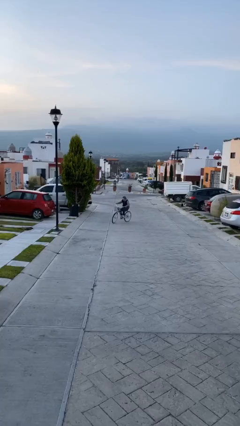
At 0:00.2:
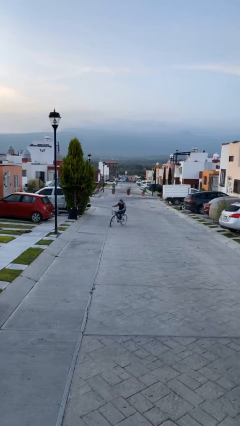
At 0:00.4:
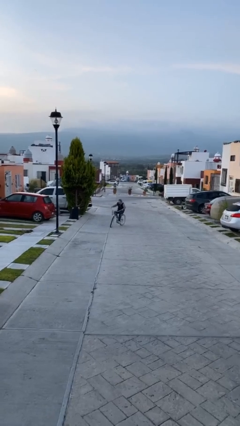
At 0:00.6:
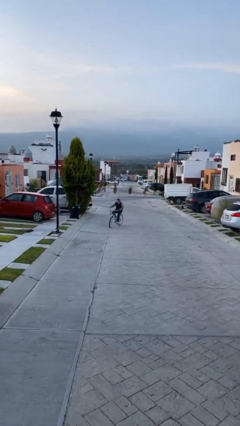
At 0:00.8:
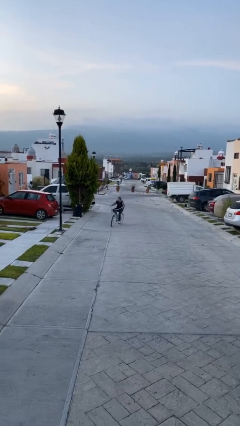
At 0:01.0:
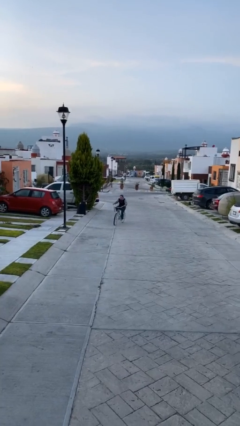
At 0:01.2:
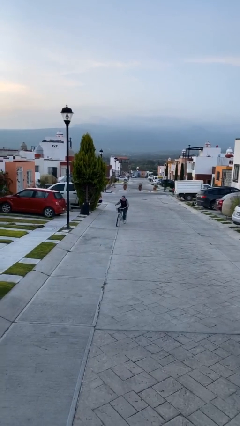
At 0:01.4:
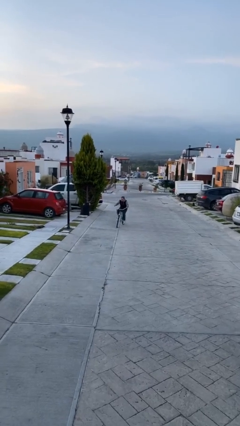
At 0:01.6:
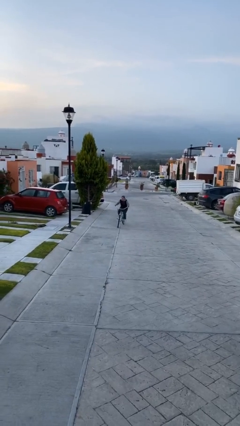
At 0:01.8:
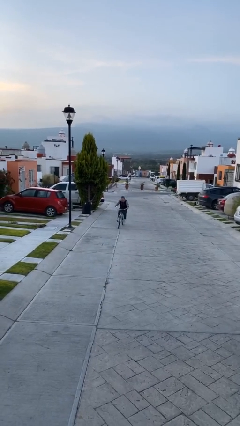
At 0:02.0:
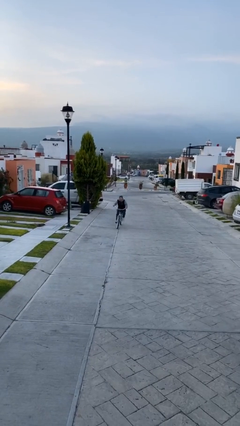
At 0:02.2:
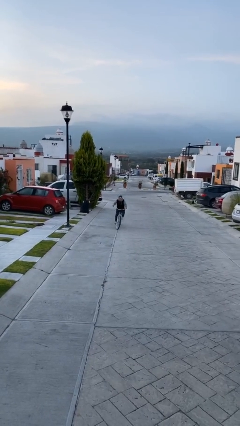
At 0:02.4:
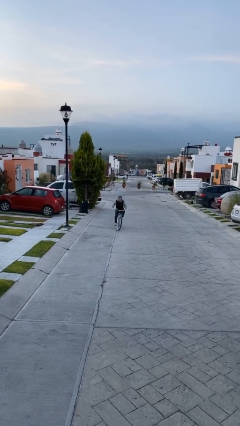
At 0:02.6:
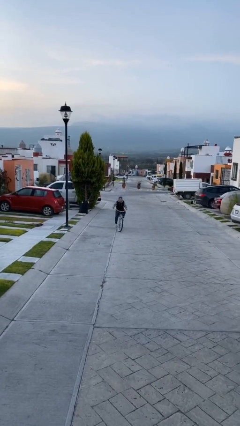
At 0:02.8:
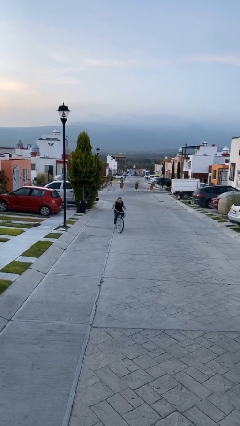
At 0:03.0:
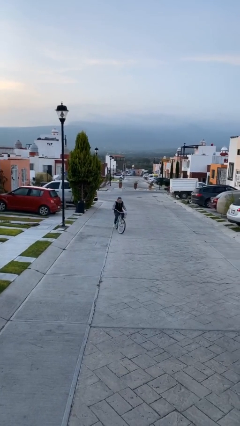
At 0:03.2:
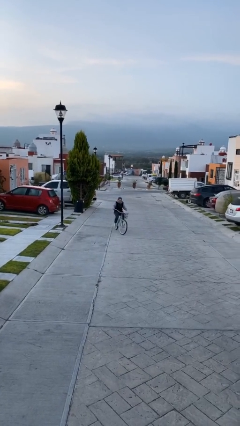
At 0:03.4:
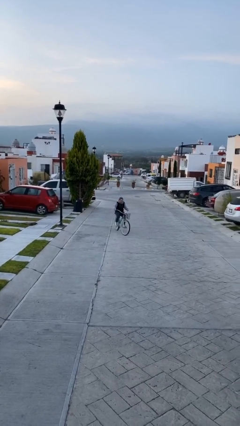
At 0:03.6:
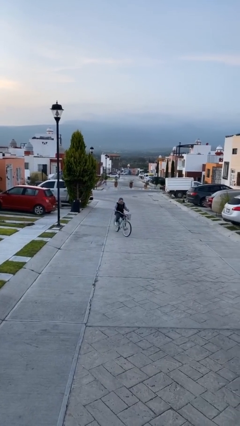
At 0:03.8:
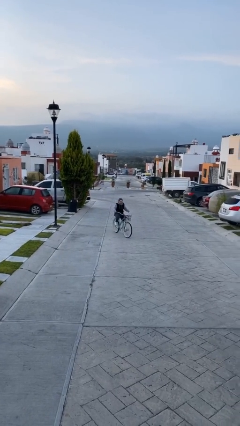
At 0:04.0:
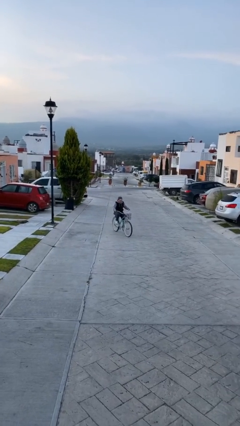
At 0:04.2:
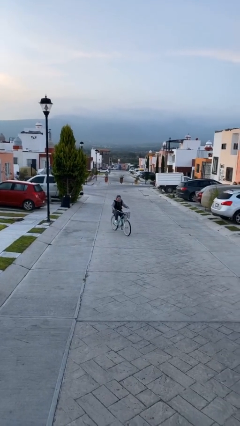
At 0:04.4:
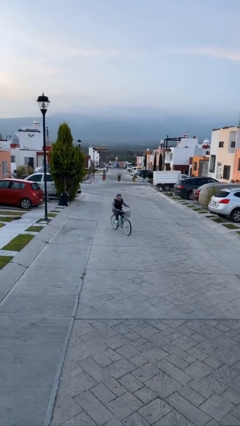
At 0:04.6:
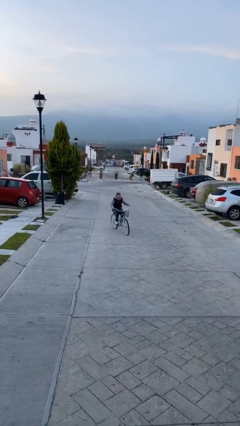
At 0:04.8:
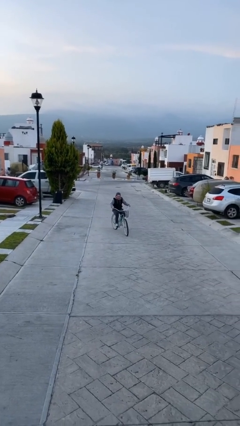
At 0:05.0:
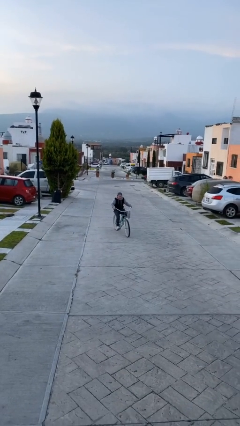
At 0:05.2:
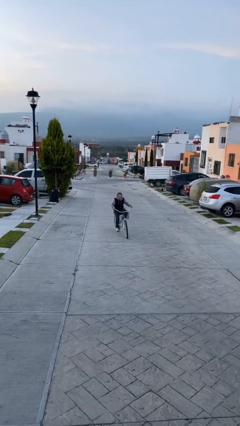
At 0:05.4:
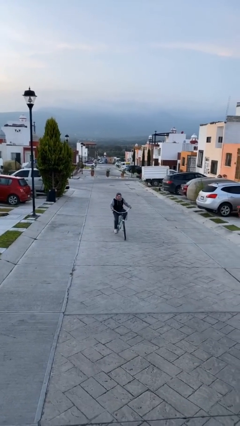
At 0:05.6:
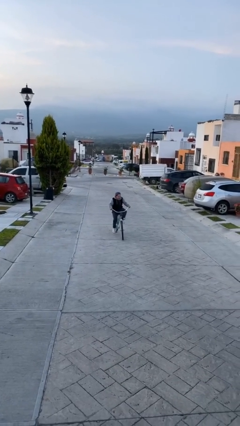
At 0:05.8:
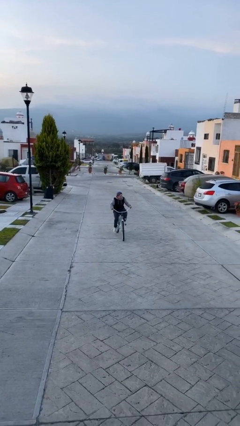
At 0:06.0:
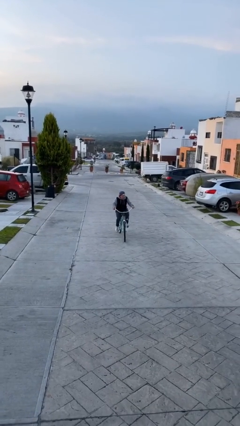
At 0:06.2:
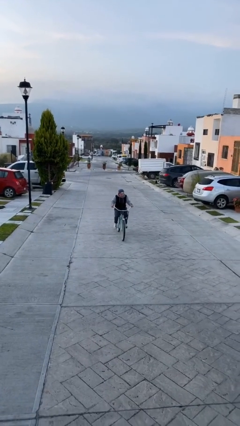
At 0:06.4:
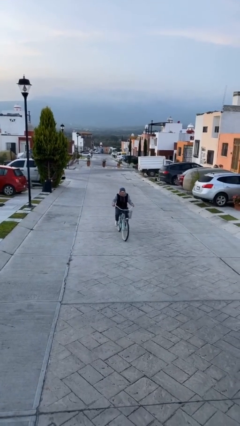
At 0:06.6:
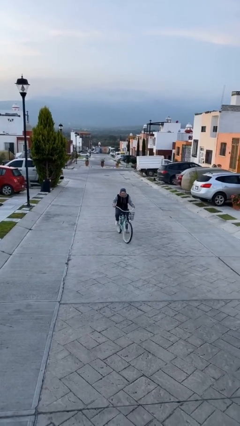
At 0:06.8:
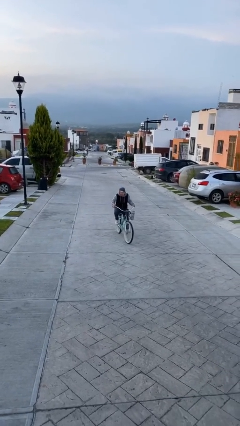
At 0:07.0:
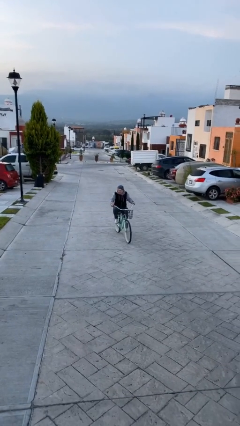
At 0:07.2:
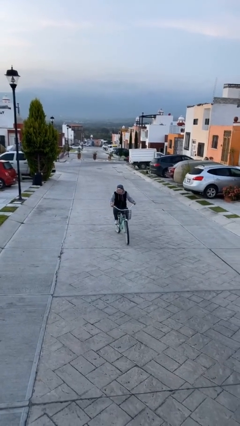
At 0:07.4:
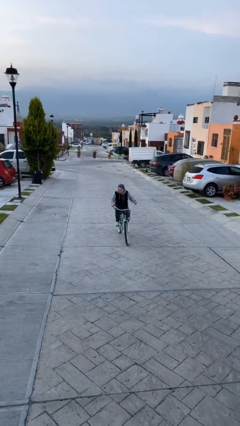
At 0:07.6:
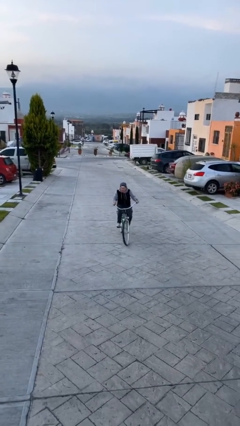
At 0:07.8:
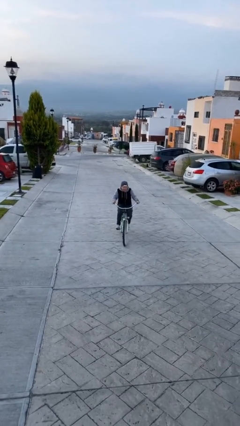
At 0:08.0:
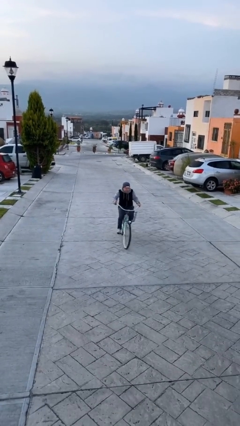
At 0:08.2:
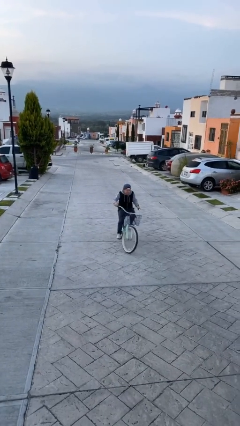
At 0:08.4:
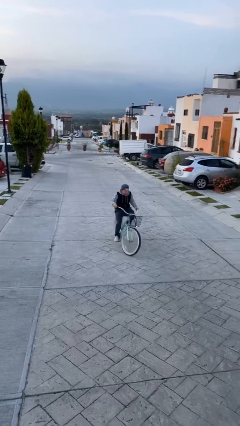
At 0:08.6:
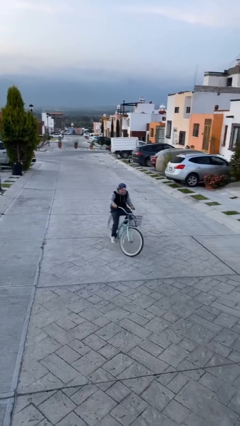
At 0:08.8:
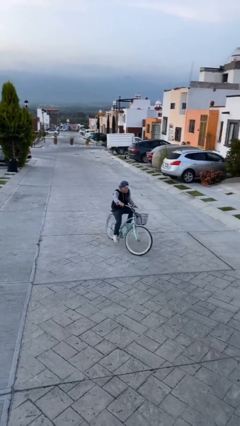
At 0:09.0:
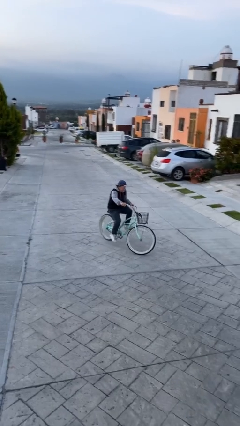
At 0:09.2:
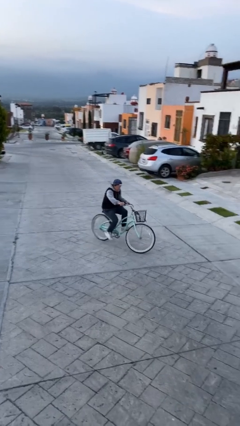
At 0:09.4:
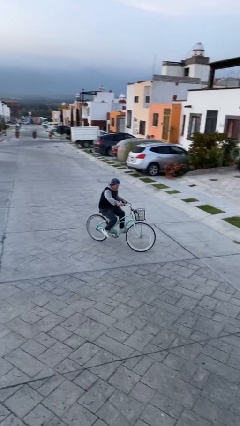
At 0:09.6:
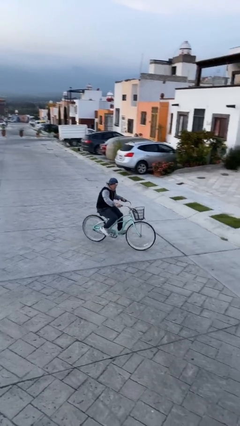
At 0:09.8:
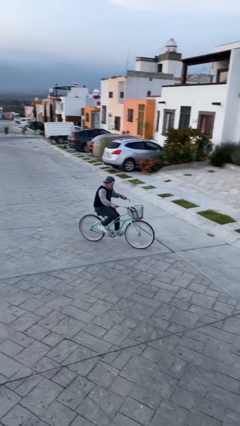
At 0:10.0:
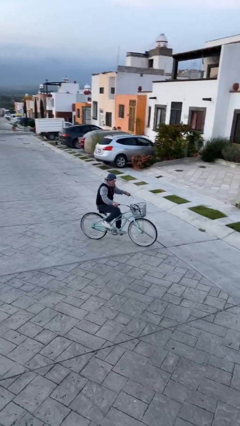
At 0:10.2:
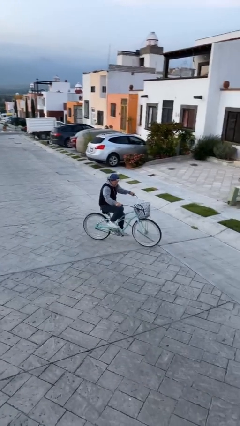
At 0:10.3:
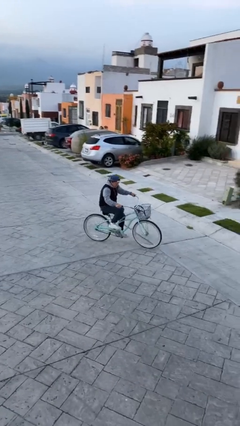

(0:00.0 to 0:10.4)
person rides bicycle

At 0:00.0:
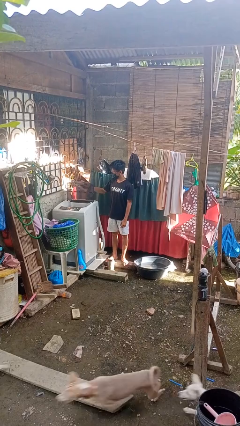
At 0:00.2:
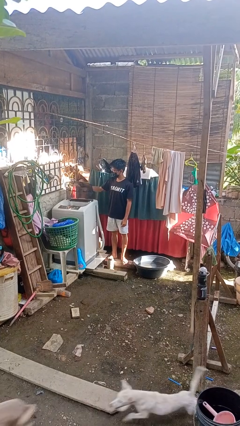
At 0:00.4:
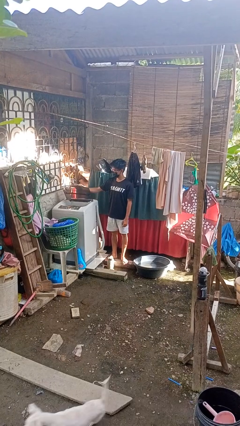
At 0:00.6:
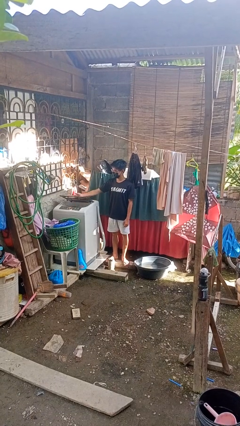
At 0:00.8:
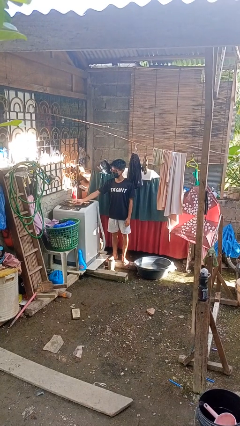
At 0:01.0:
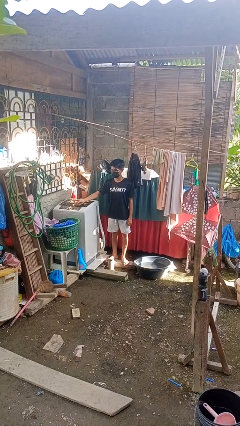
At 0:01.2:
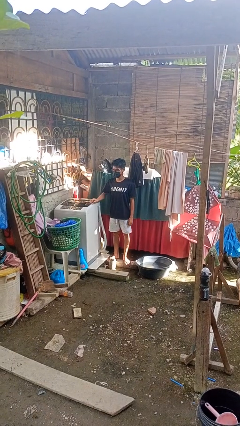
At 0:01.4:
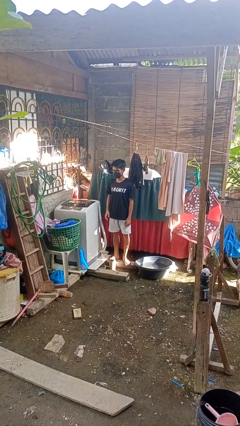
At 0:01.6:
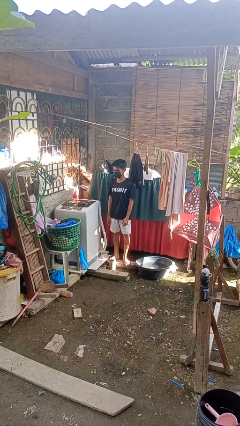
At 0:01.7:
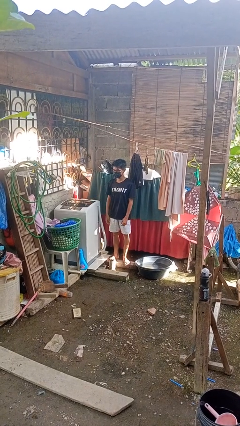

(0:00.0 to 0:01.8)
person closes clothes washer

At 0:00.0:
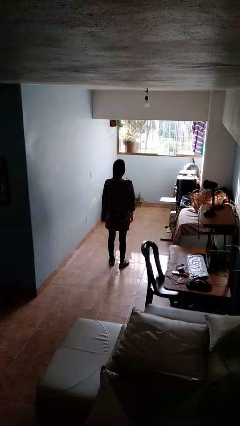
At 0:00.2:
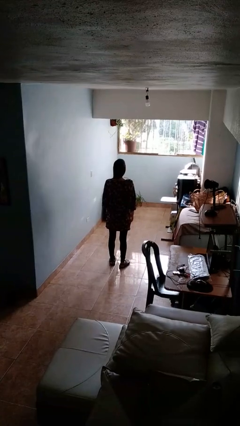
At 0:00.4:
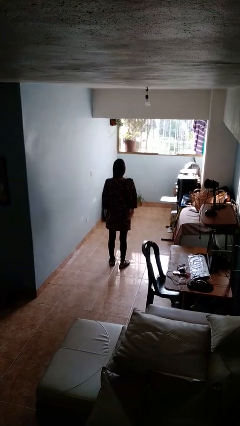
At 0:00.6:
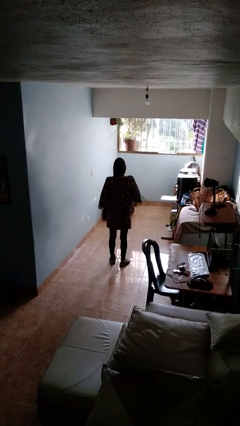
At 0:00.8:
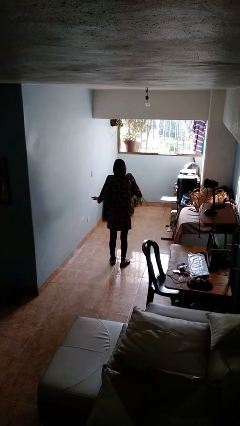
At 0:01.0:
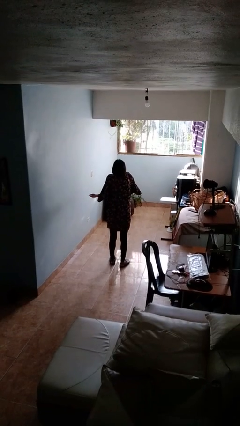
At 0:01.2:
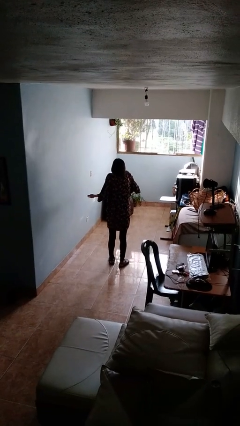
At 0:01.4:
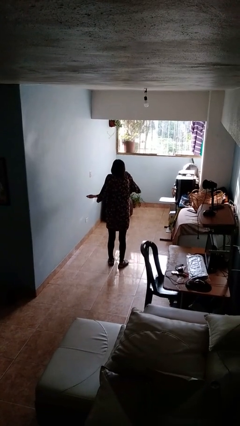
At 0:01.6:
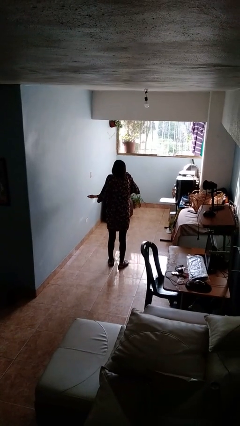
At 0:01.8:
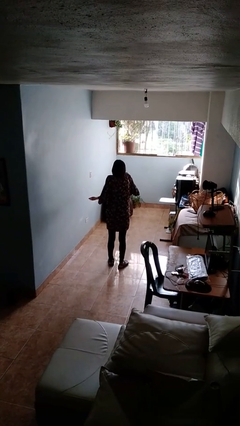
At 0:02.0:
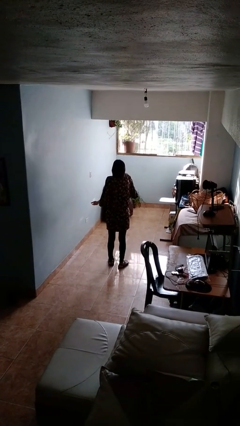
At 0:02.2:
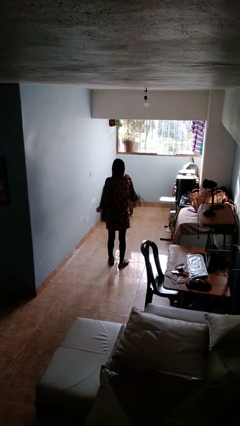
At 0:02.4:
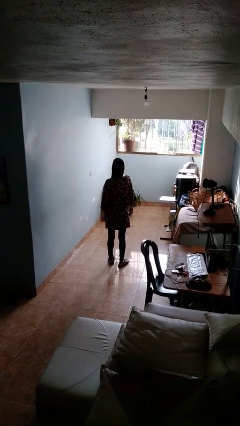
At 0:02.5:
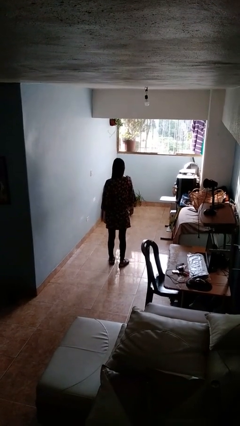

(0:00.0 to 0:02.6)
person shrugs

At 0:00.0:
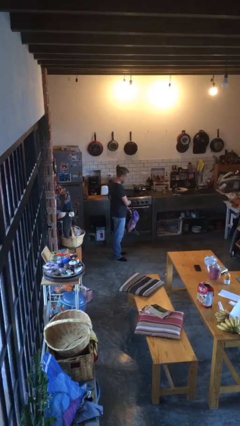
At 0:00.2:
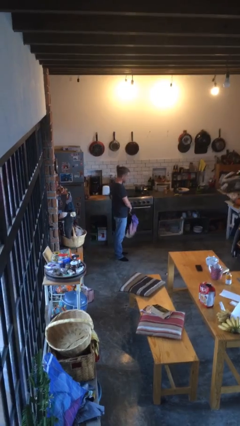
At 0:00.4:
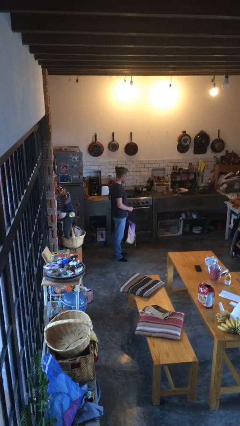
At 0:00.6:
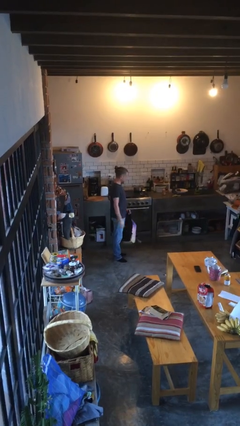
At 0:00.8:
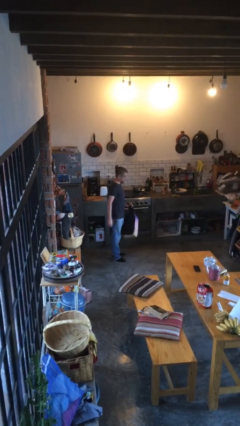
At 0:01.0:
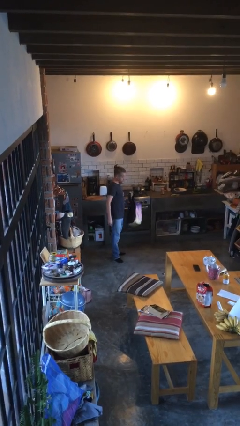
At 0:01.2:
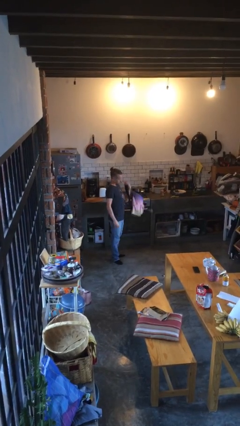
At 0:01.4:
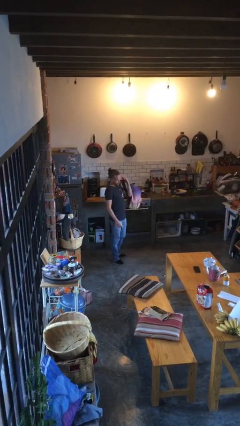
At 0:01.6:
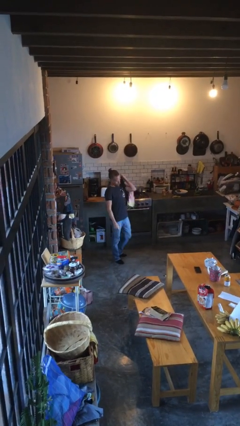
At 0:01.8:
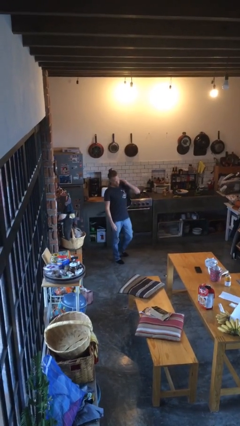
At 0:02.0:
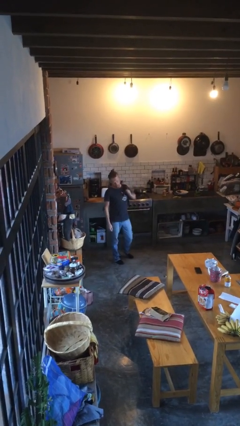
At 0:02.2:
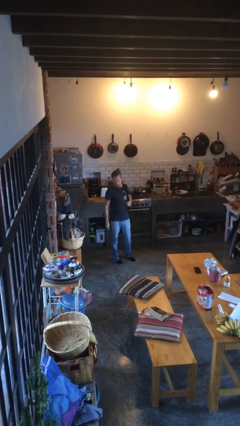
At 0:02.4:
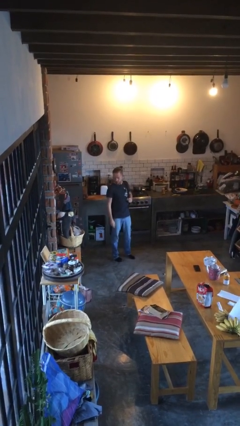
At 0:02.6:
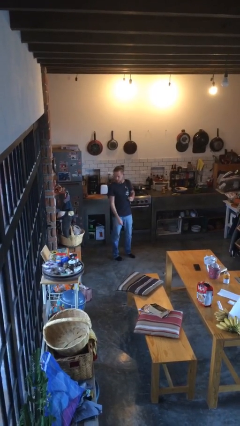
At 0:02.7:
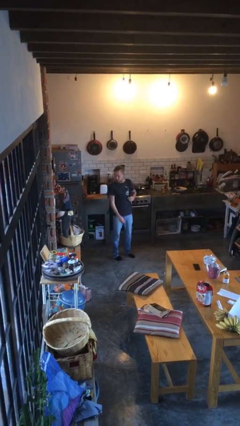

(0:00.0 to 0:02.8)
person puts on backpack

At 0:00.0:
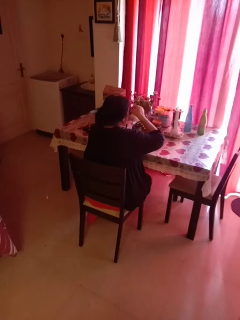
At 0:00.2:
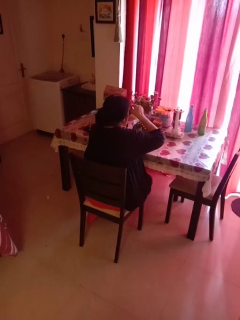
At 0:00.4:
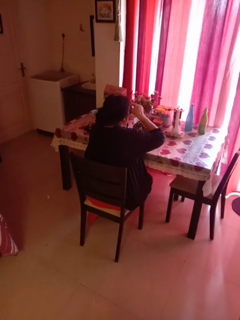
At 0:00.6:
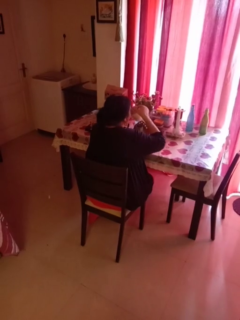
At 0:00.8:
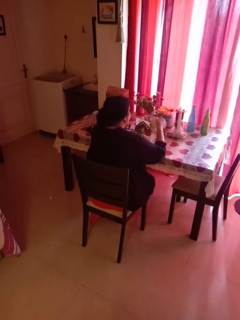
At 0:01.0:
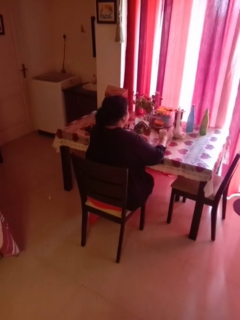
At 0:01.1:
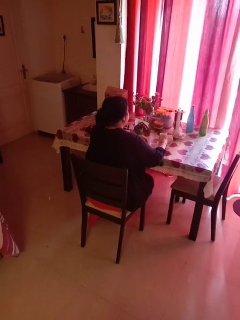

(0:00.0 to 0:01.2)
person drinks from mug
